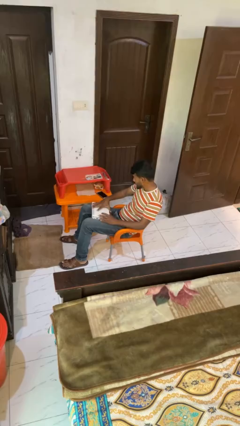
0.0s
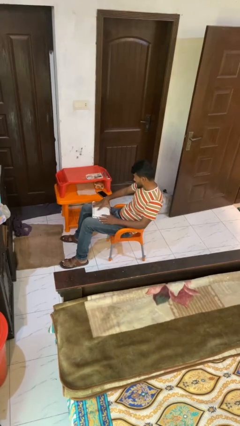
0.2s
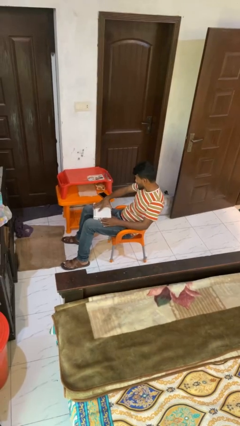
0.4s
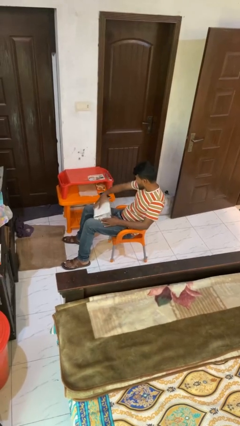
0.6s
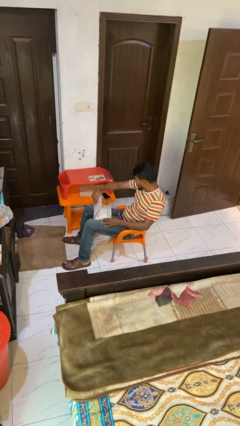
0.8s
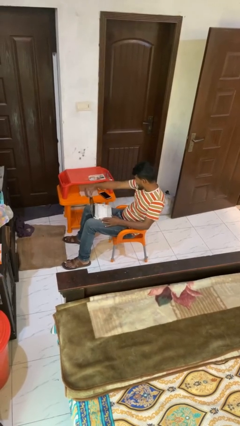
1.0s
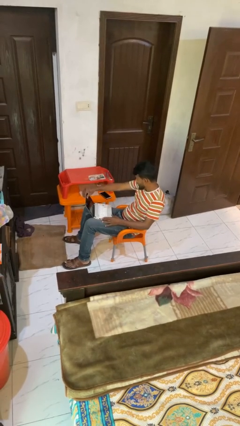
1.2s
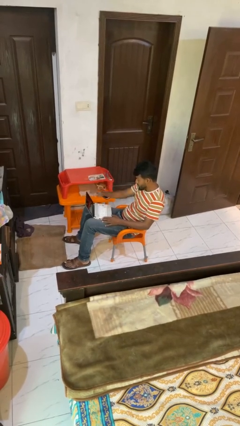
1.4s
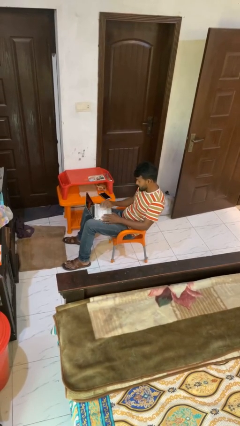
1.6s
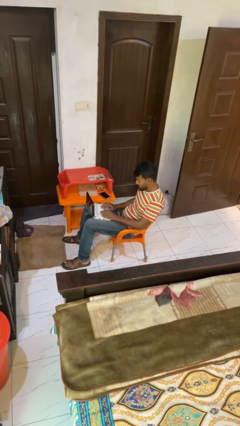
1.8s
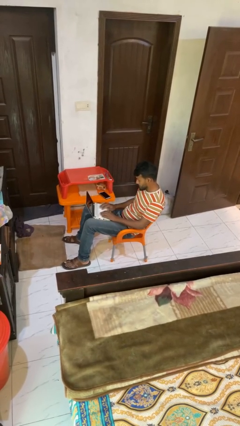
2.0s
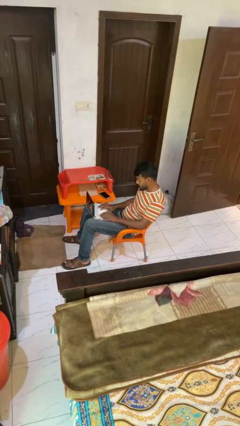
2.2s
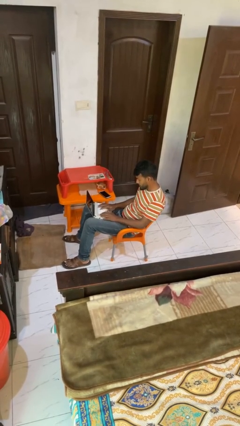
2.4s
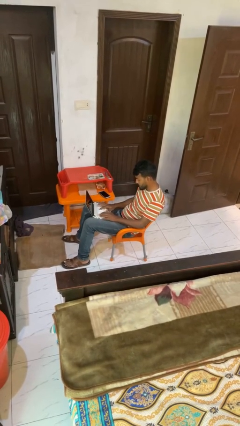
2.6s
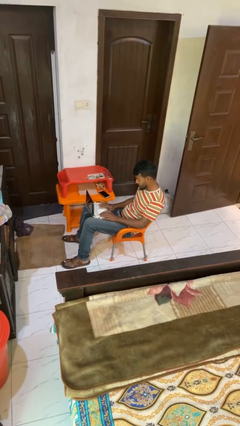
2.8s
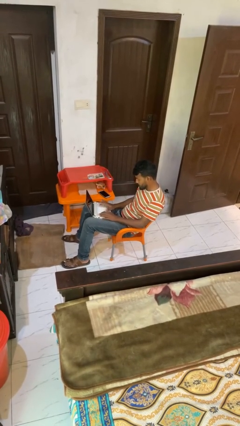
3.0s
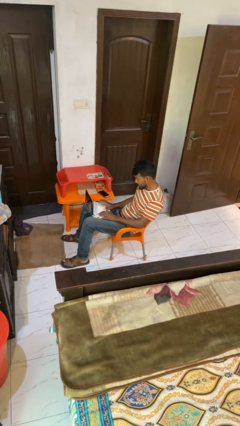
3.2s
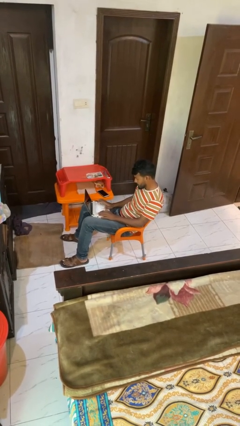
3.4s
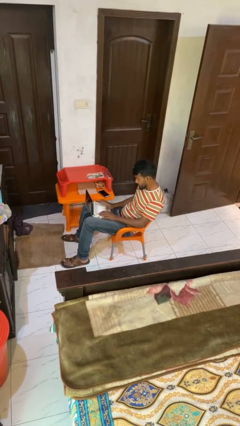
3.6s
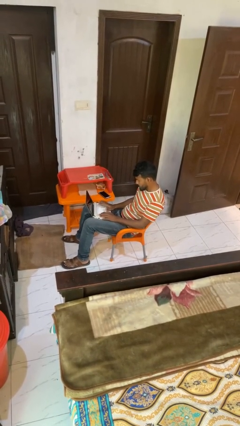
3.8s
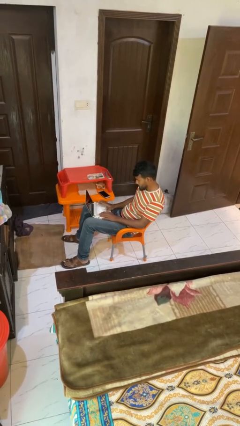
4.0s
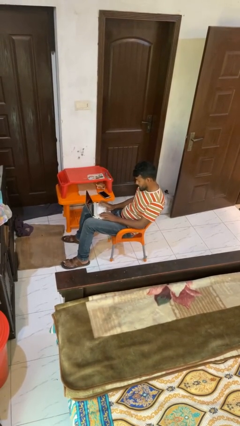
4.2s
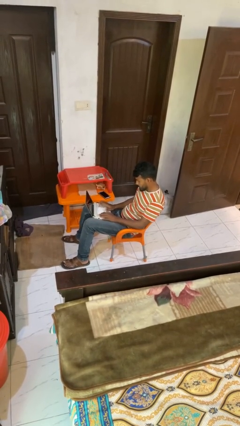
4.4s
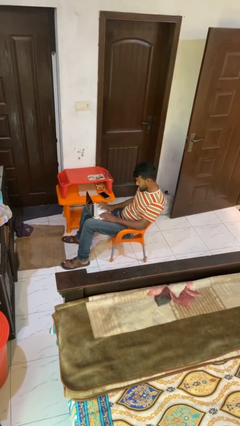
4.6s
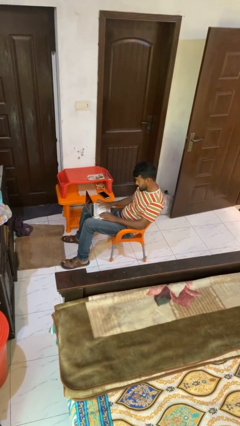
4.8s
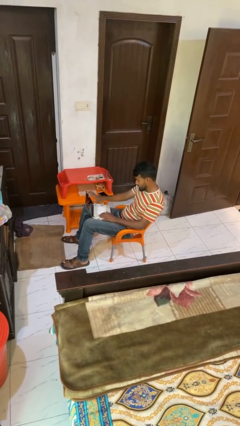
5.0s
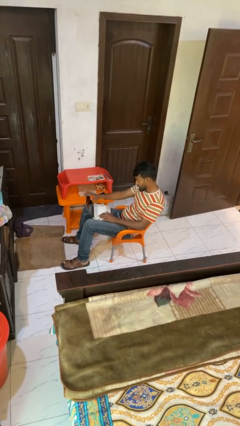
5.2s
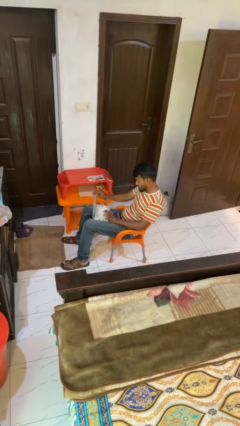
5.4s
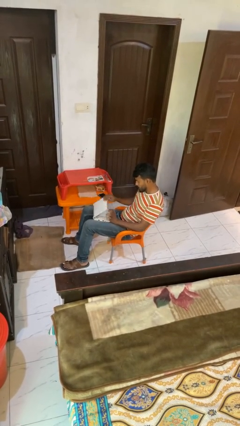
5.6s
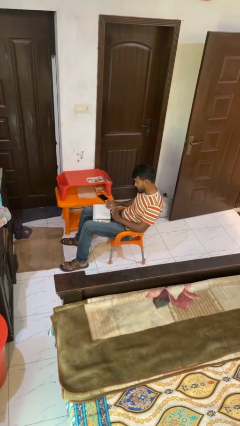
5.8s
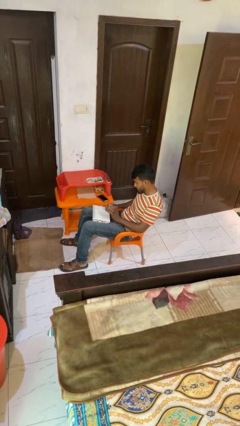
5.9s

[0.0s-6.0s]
person interacts with laptop

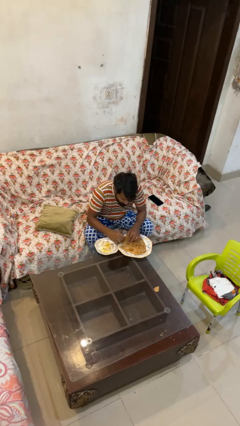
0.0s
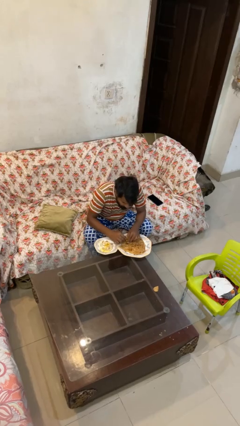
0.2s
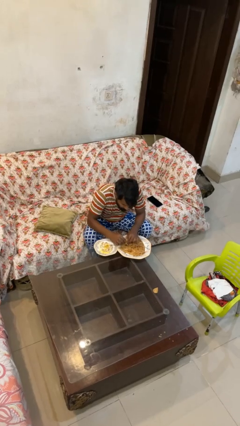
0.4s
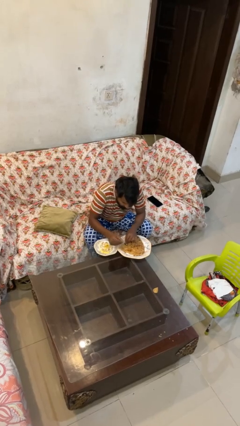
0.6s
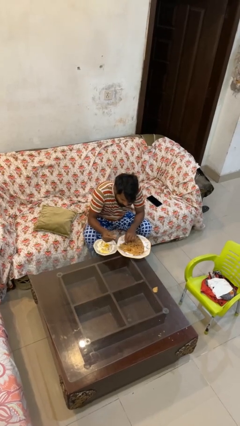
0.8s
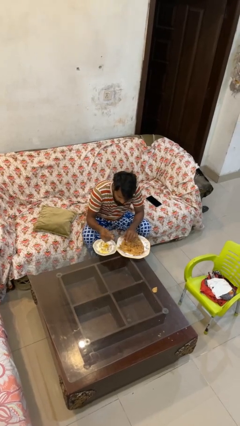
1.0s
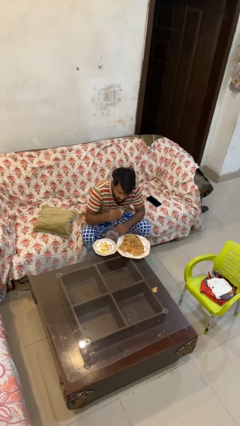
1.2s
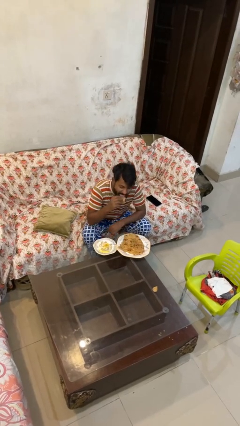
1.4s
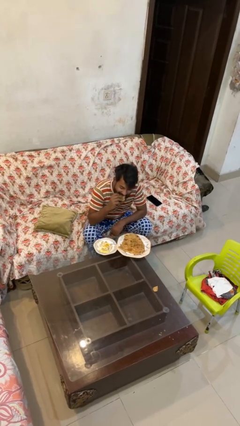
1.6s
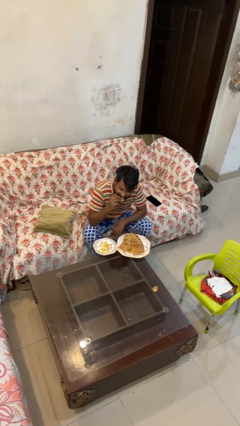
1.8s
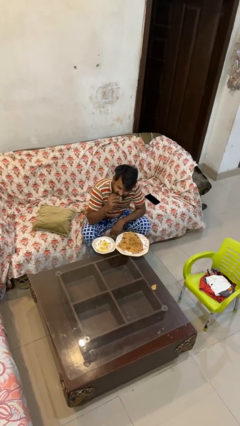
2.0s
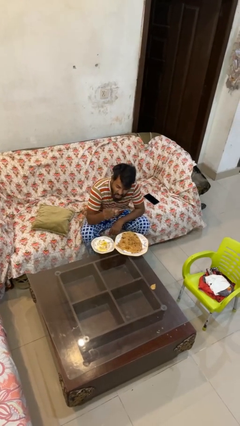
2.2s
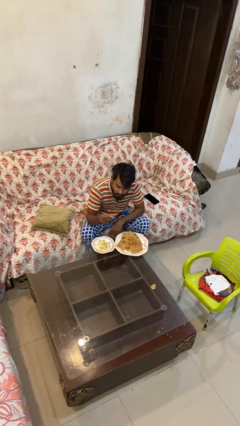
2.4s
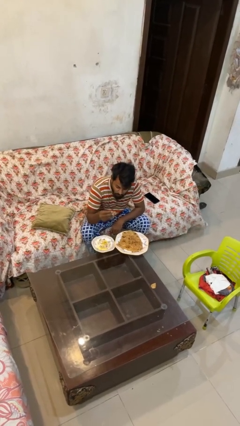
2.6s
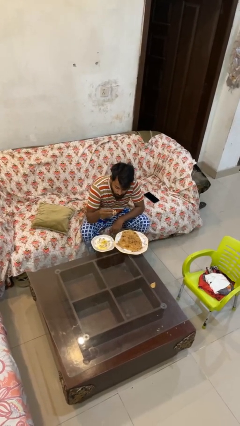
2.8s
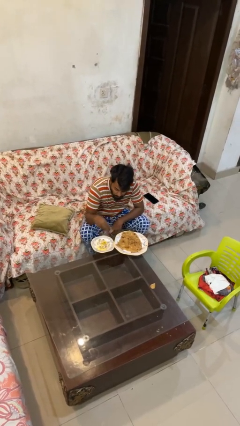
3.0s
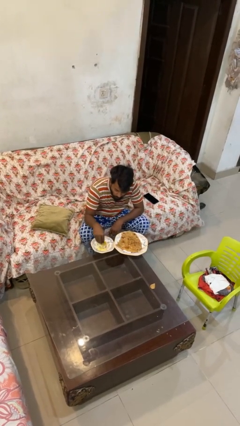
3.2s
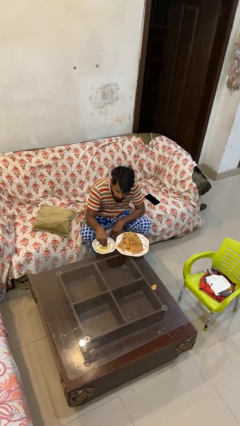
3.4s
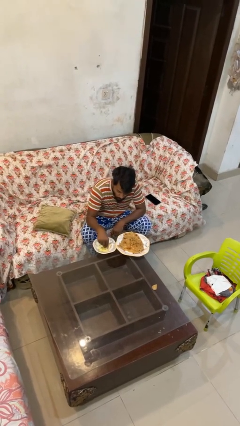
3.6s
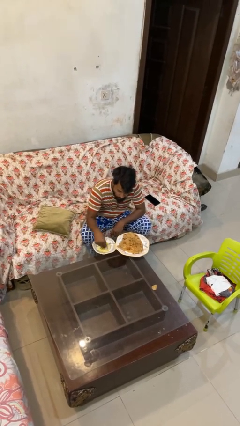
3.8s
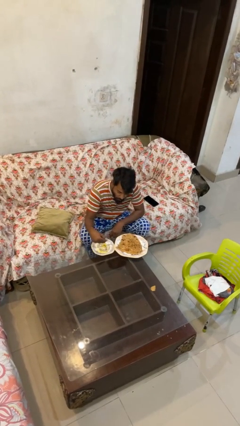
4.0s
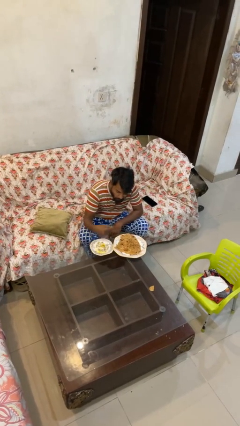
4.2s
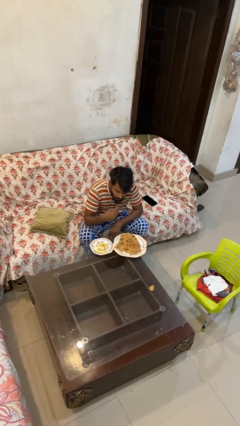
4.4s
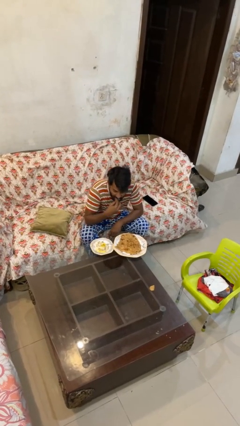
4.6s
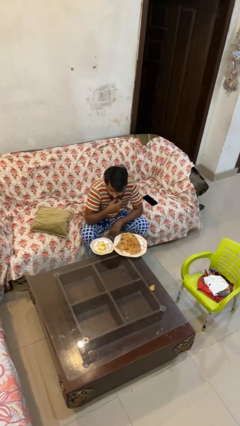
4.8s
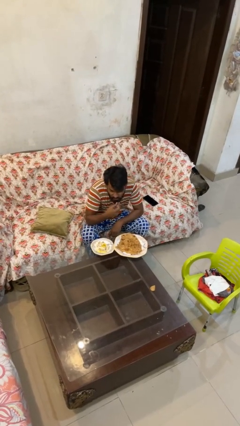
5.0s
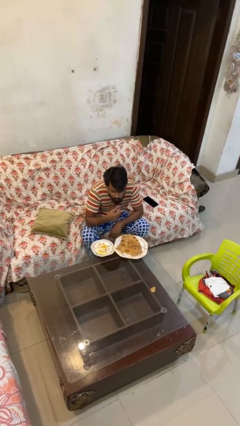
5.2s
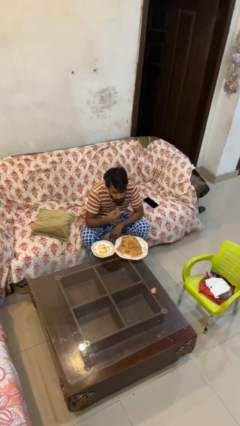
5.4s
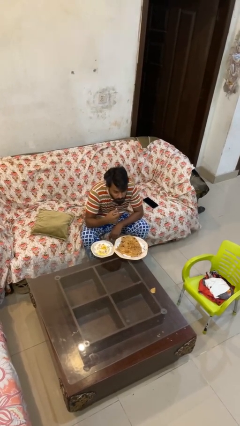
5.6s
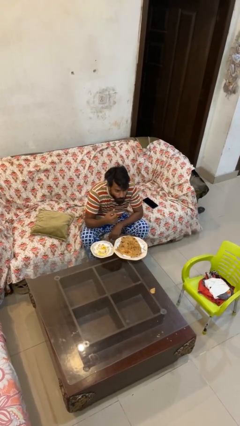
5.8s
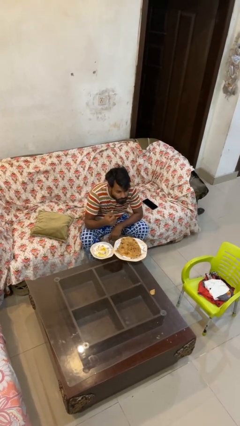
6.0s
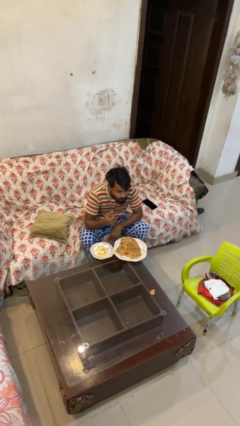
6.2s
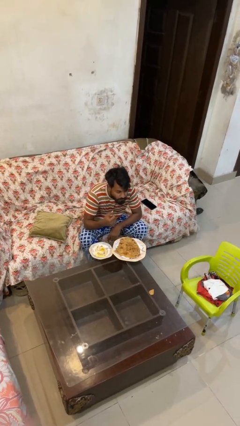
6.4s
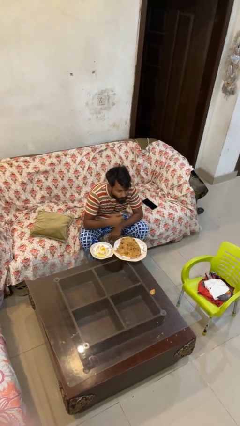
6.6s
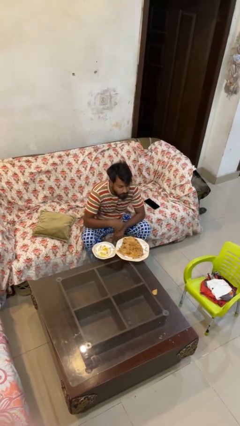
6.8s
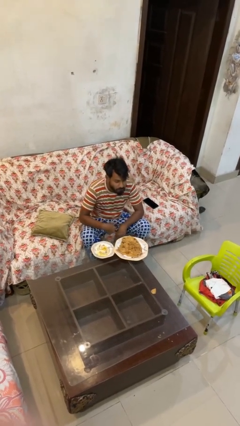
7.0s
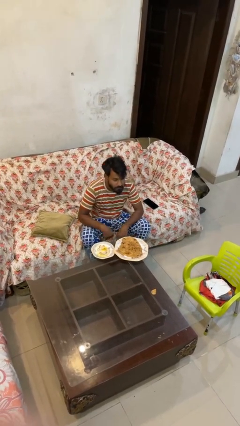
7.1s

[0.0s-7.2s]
person eats with hands

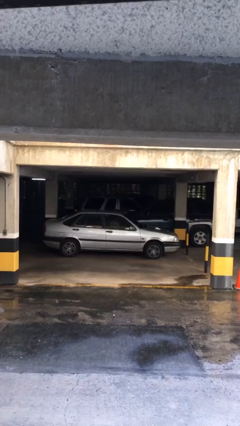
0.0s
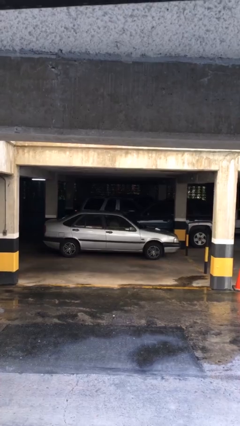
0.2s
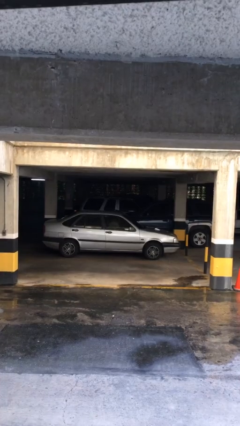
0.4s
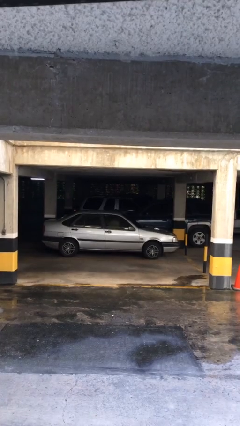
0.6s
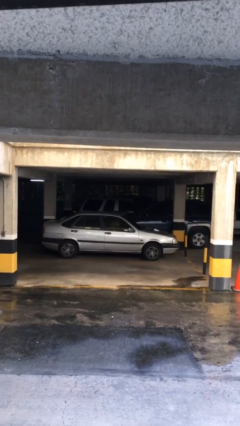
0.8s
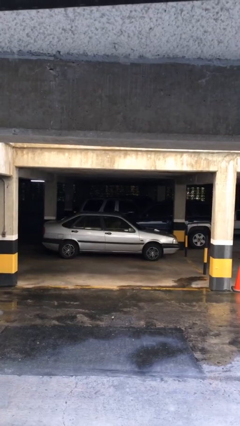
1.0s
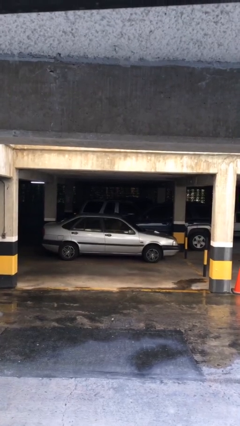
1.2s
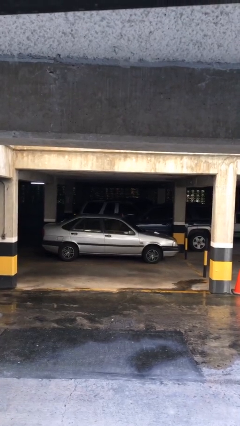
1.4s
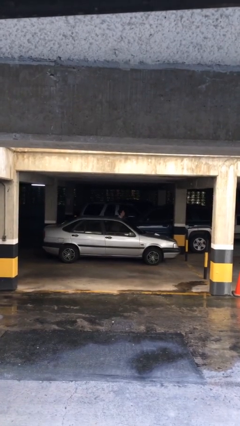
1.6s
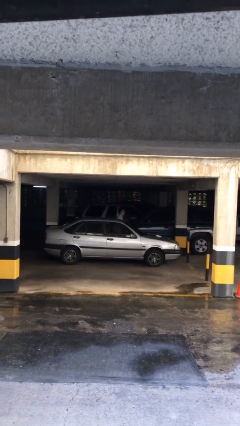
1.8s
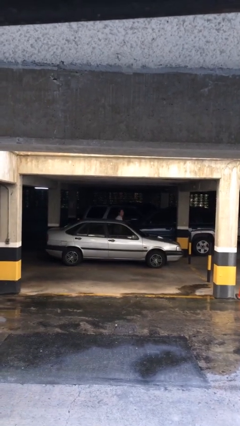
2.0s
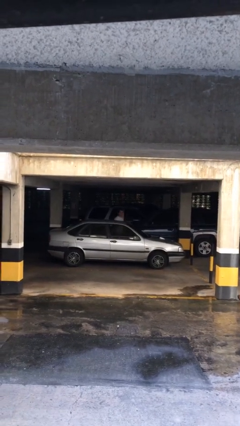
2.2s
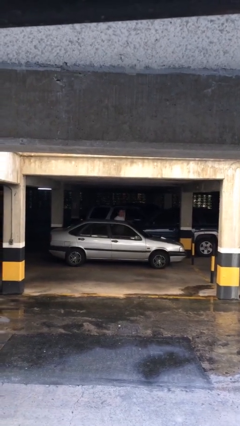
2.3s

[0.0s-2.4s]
person exits car

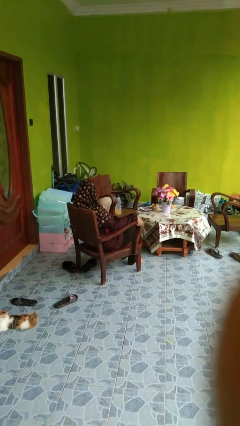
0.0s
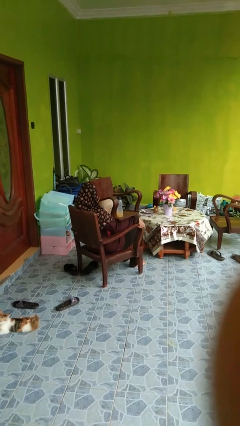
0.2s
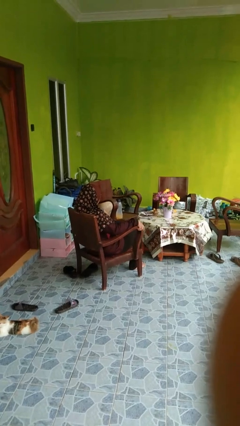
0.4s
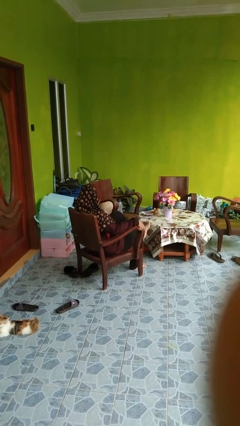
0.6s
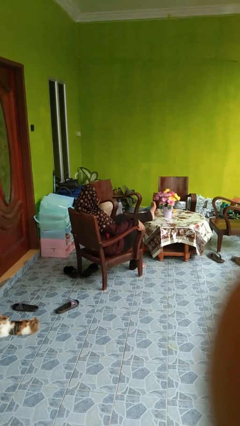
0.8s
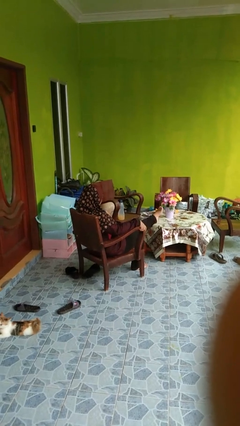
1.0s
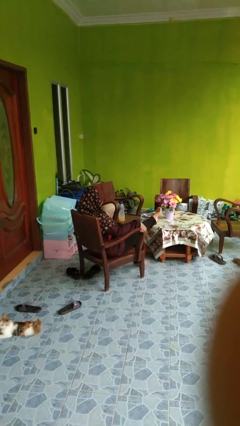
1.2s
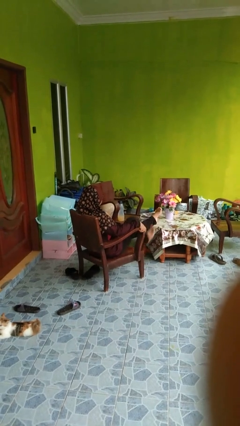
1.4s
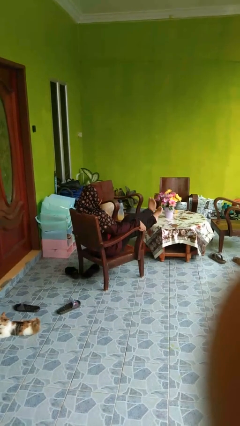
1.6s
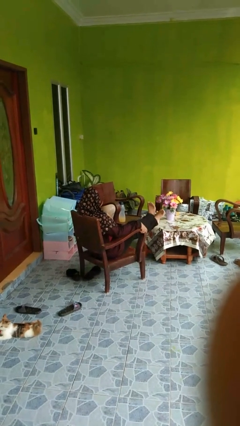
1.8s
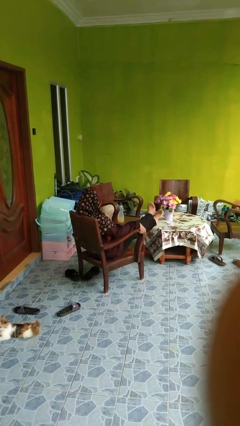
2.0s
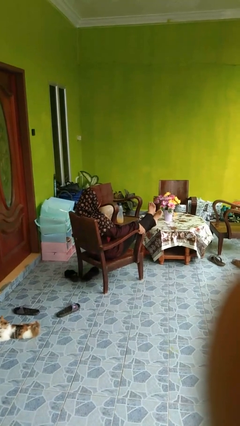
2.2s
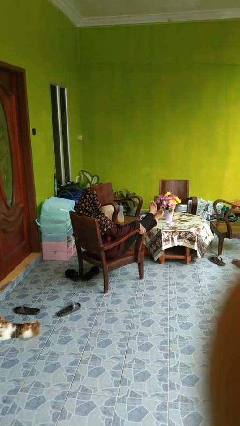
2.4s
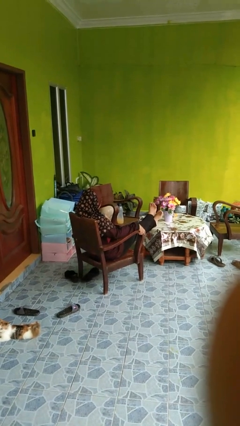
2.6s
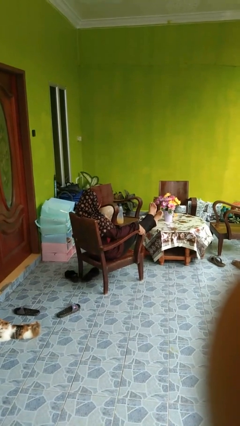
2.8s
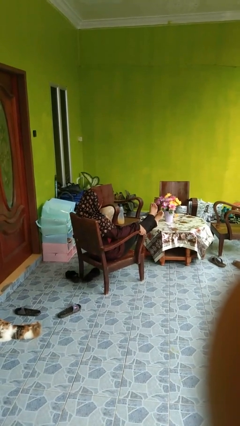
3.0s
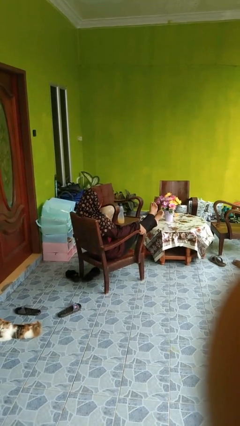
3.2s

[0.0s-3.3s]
person crosses arms
